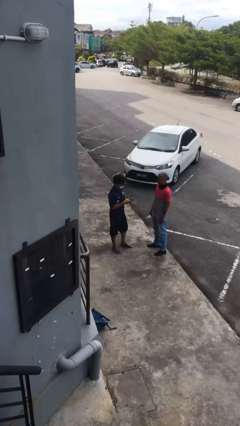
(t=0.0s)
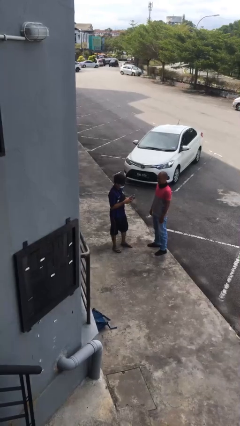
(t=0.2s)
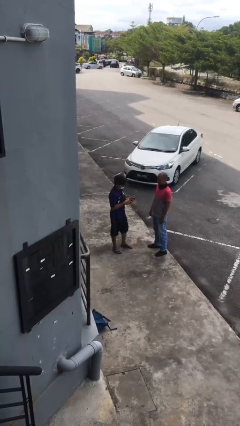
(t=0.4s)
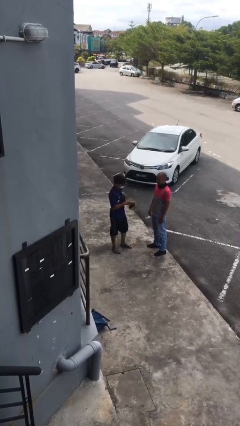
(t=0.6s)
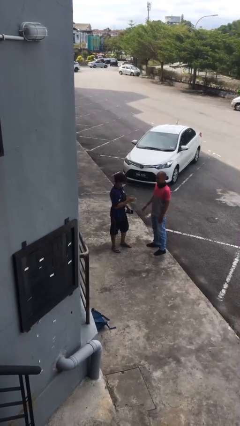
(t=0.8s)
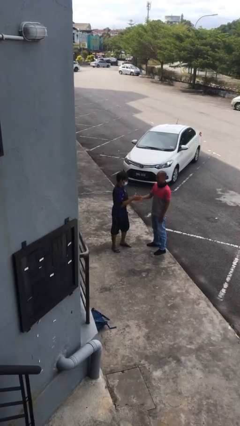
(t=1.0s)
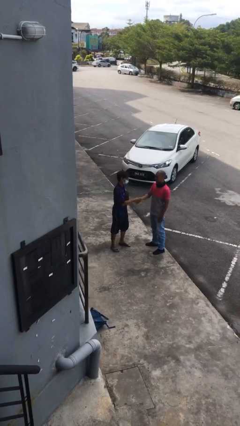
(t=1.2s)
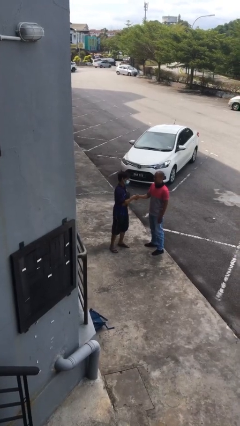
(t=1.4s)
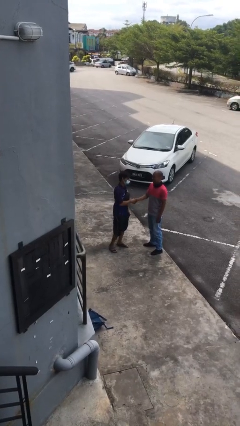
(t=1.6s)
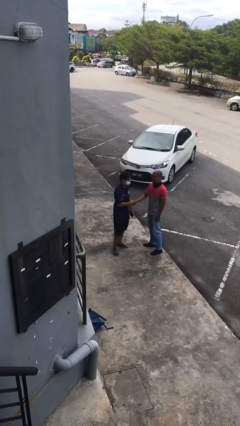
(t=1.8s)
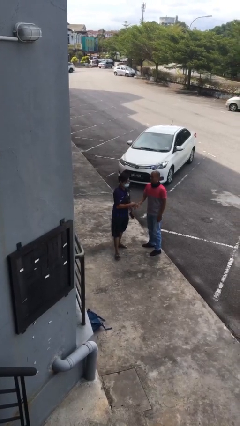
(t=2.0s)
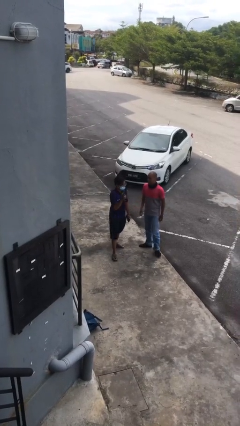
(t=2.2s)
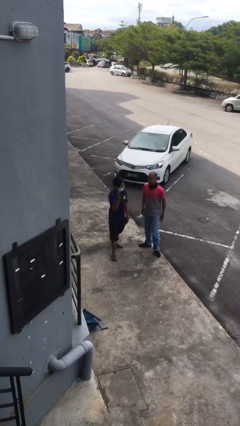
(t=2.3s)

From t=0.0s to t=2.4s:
person shakes hand

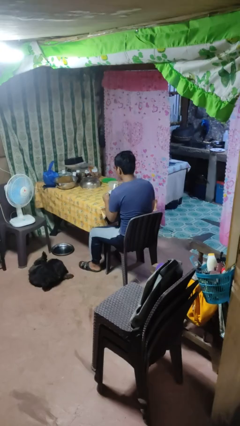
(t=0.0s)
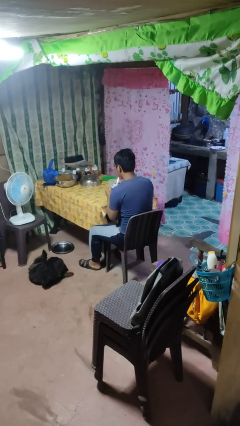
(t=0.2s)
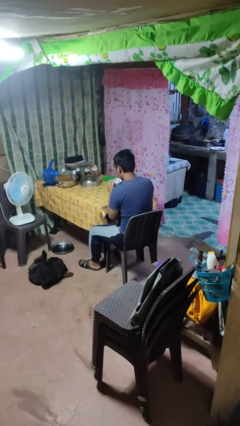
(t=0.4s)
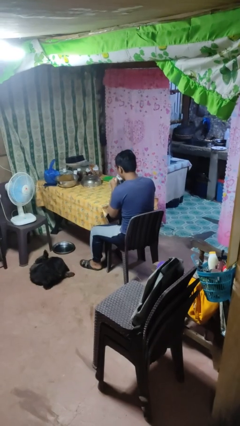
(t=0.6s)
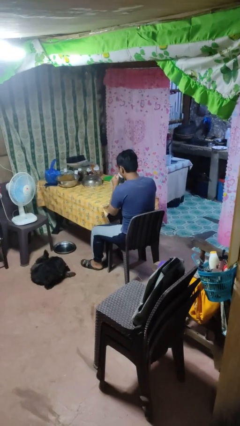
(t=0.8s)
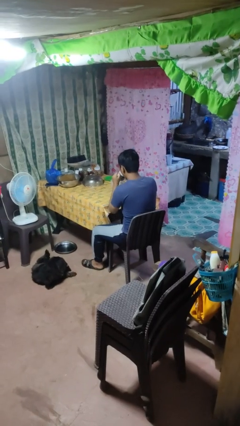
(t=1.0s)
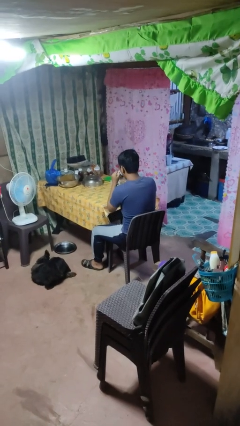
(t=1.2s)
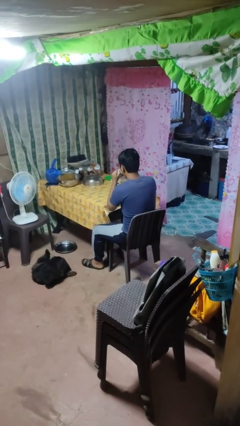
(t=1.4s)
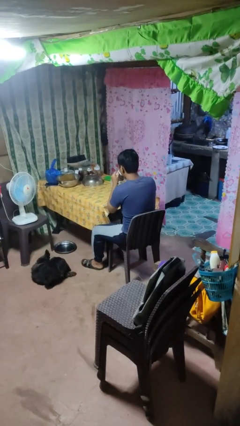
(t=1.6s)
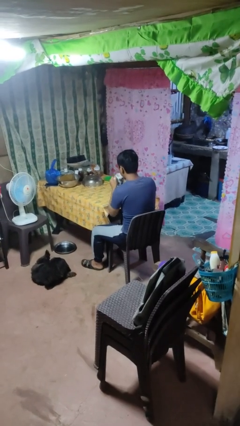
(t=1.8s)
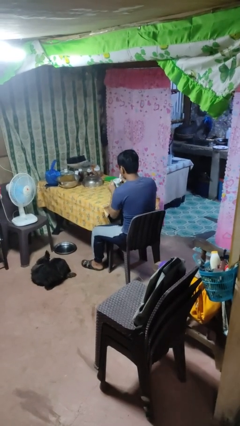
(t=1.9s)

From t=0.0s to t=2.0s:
person drinks from mug

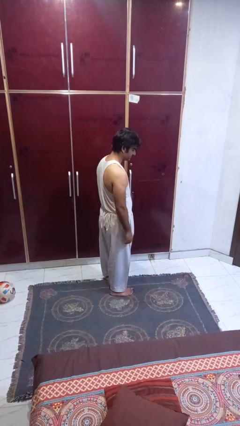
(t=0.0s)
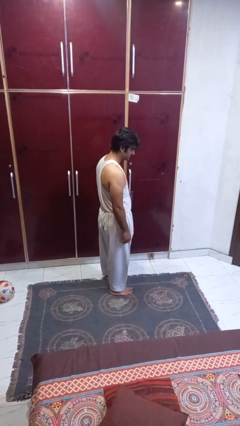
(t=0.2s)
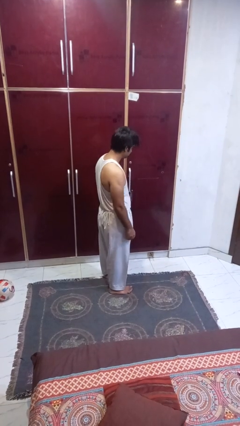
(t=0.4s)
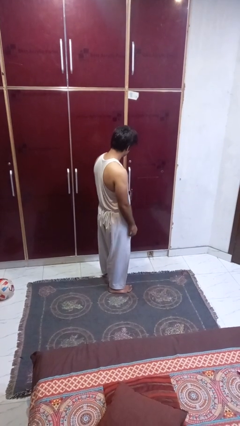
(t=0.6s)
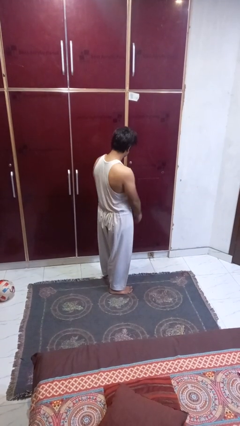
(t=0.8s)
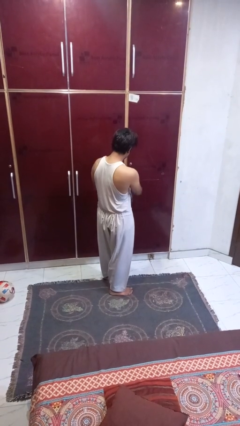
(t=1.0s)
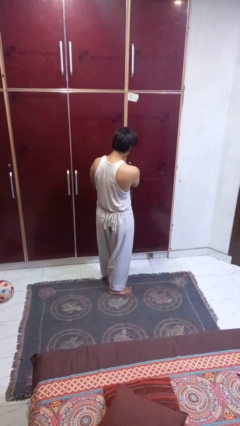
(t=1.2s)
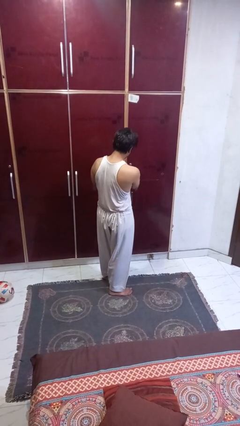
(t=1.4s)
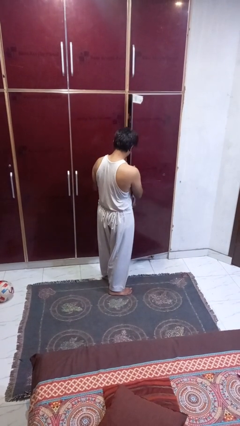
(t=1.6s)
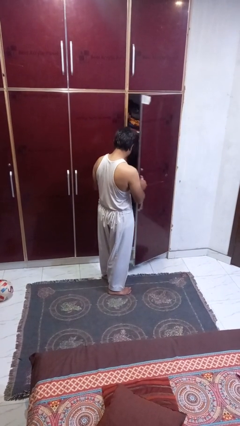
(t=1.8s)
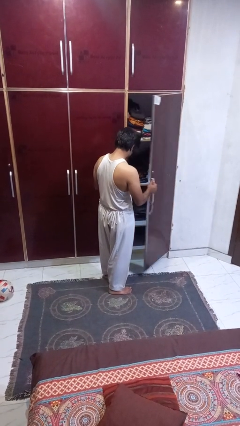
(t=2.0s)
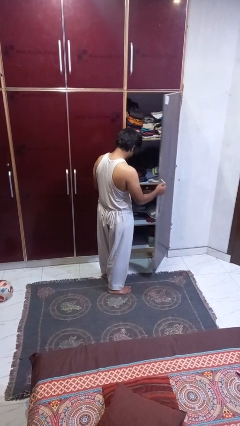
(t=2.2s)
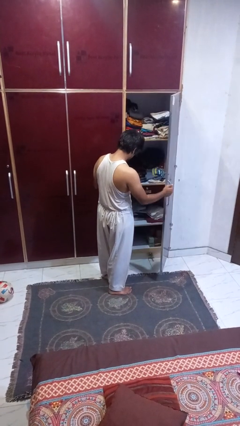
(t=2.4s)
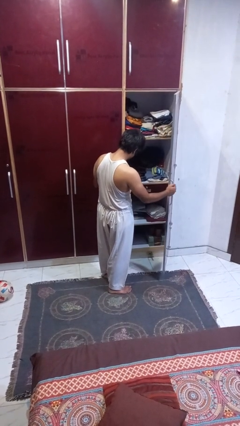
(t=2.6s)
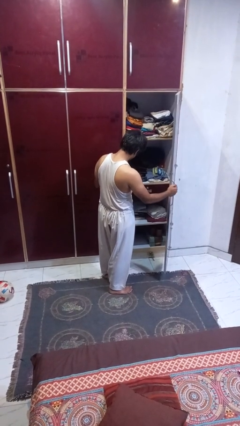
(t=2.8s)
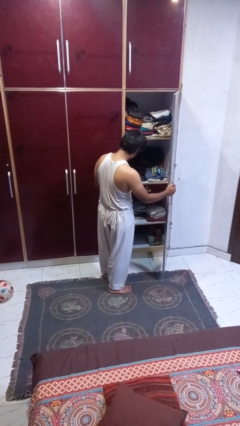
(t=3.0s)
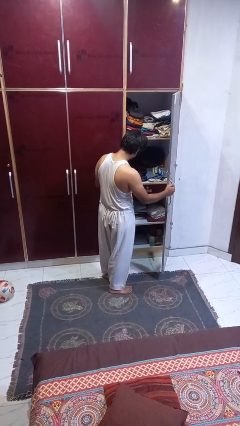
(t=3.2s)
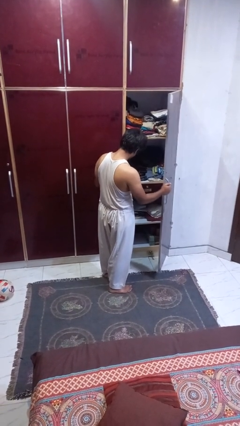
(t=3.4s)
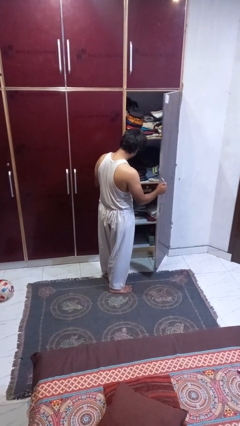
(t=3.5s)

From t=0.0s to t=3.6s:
person opens closet door

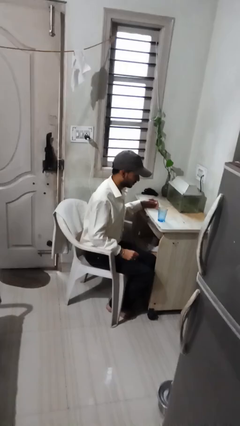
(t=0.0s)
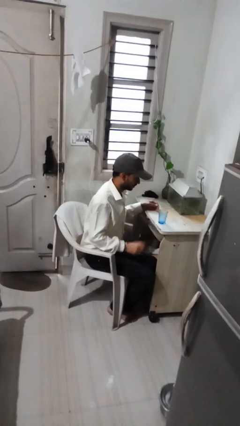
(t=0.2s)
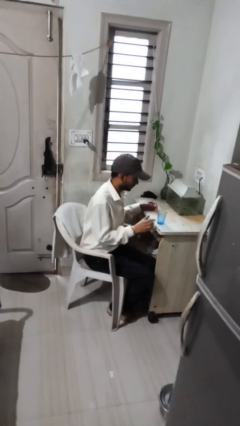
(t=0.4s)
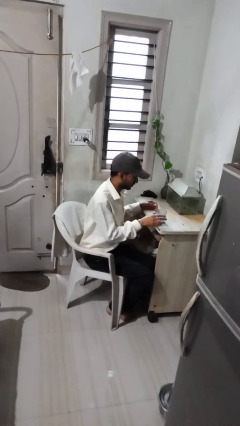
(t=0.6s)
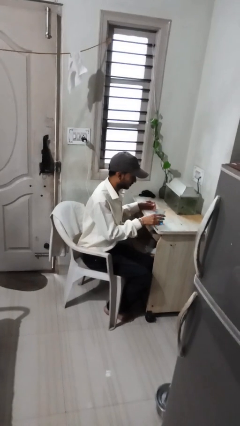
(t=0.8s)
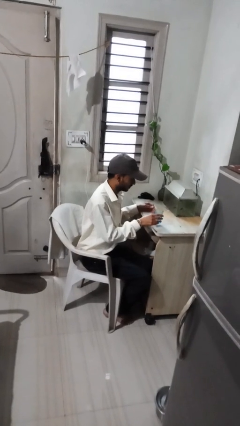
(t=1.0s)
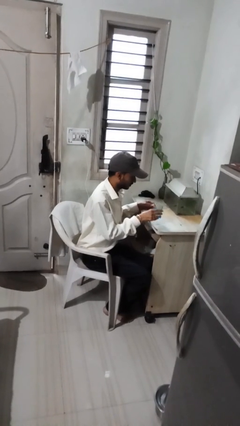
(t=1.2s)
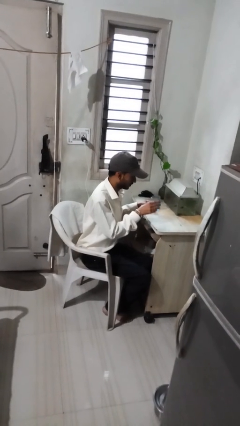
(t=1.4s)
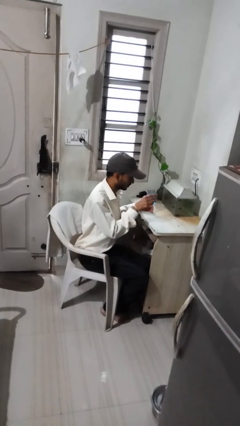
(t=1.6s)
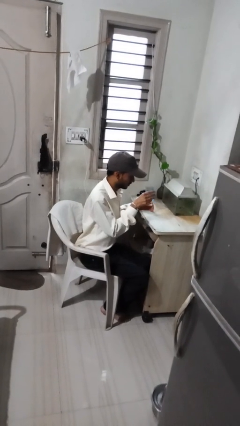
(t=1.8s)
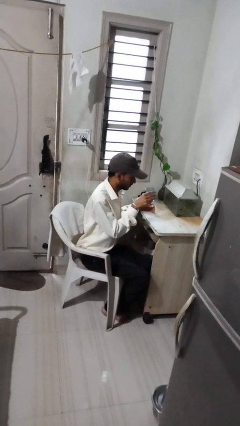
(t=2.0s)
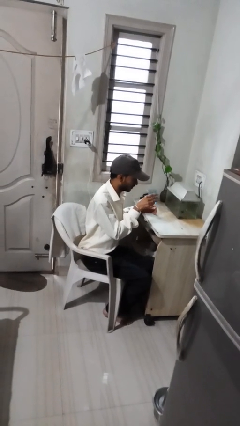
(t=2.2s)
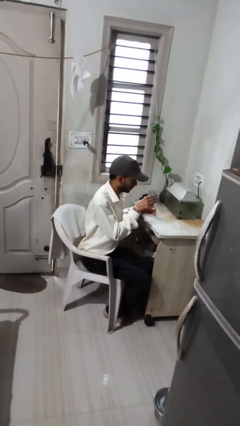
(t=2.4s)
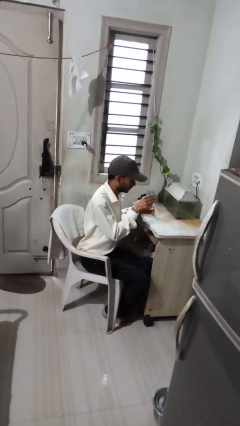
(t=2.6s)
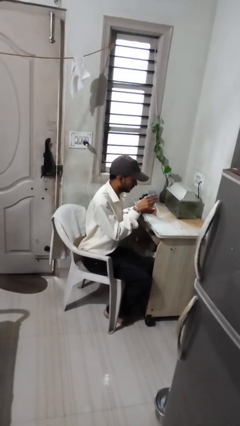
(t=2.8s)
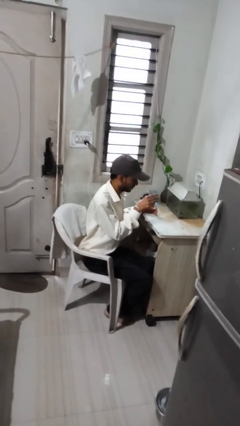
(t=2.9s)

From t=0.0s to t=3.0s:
person picks up object from table

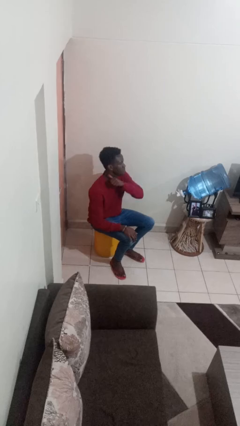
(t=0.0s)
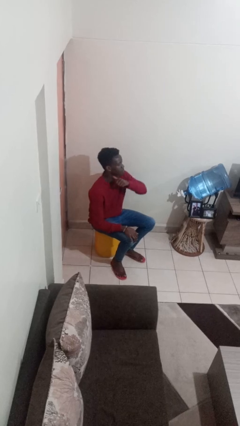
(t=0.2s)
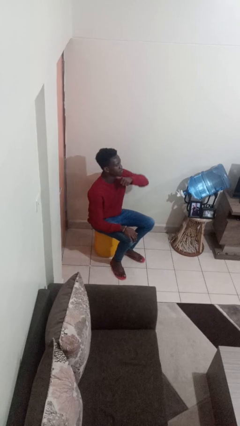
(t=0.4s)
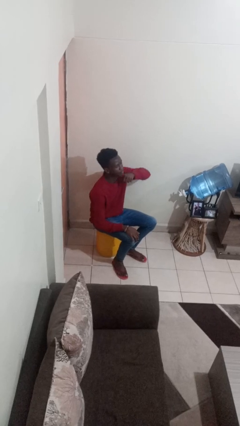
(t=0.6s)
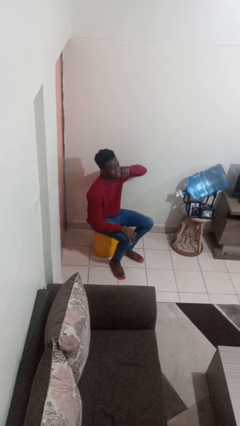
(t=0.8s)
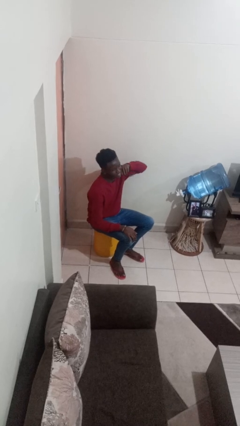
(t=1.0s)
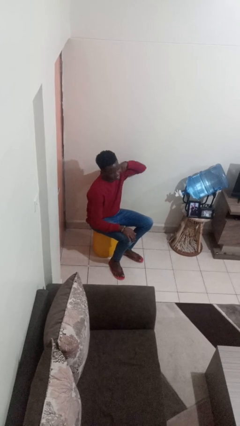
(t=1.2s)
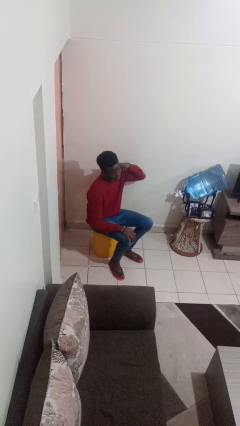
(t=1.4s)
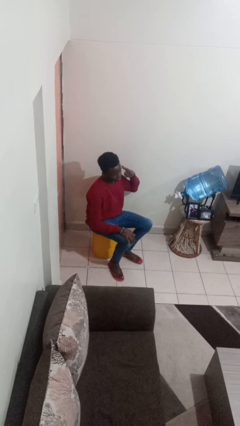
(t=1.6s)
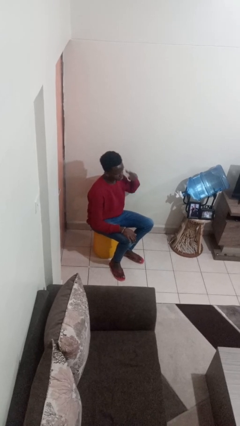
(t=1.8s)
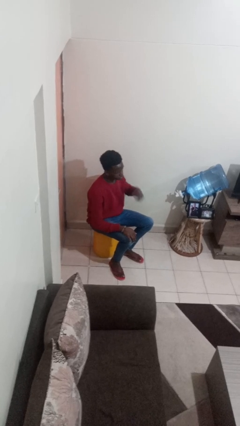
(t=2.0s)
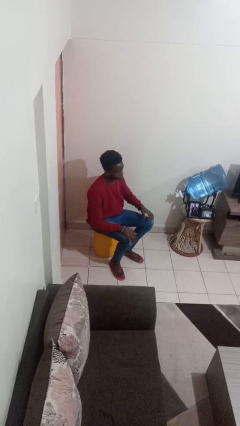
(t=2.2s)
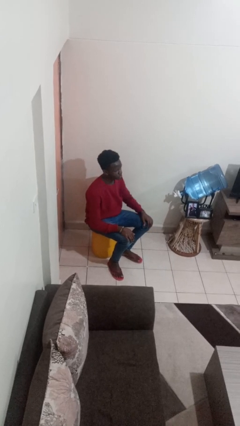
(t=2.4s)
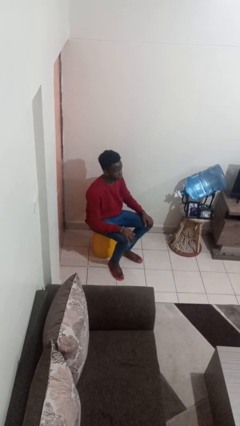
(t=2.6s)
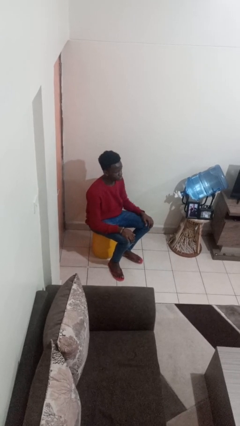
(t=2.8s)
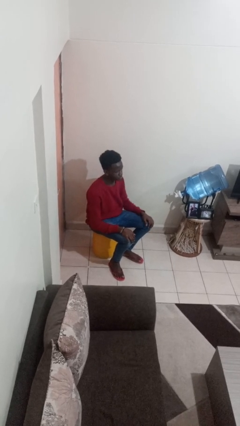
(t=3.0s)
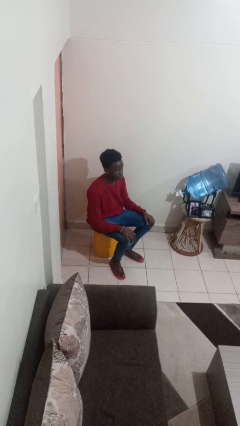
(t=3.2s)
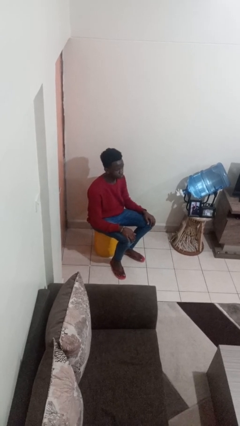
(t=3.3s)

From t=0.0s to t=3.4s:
person gestures cut

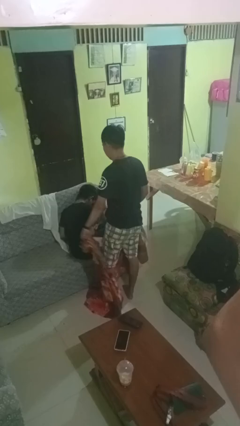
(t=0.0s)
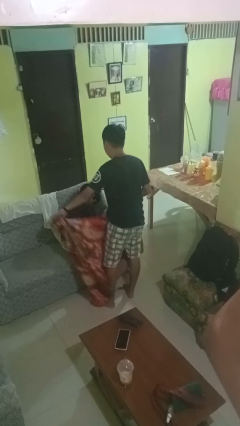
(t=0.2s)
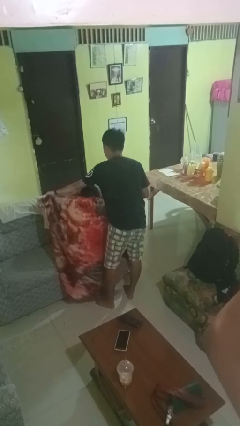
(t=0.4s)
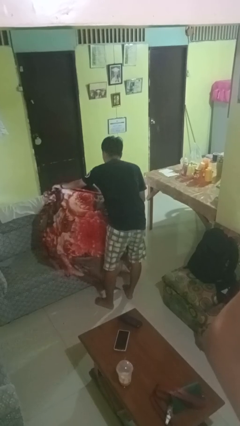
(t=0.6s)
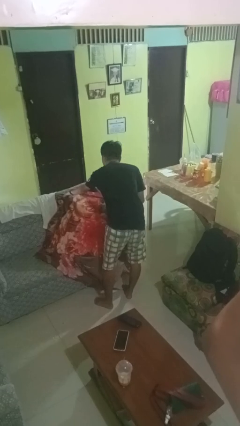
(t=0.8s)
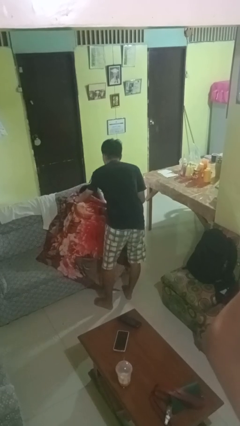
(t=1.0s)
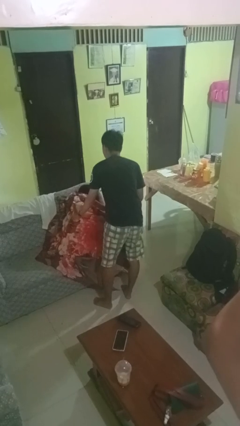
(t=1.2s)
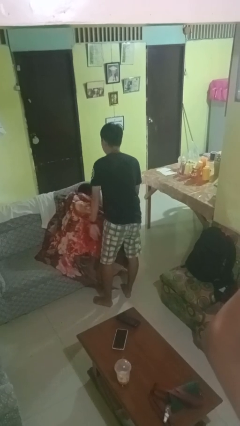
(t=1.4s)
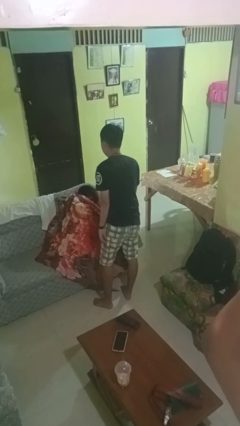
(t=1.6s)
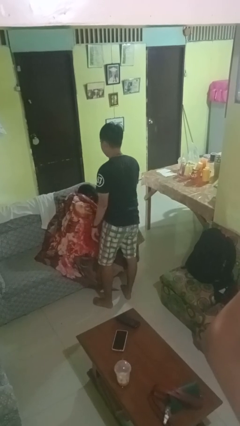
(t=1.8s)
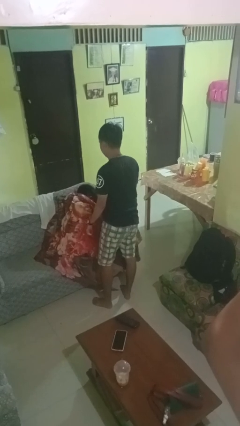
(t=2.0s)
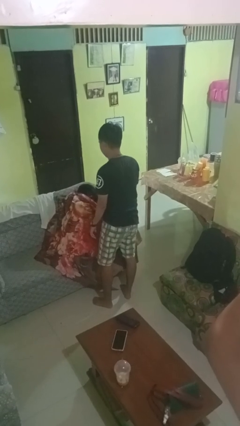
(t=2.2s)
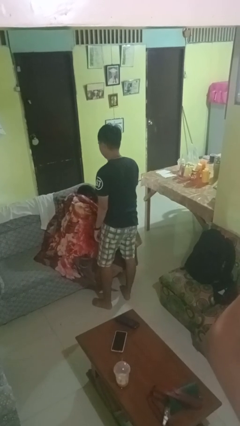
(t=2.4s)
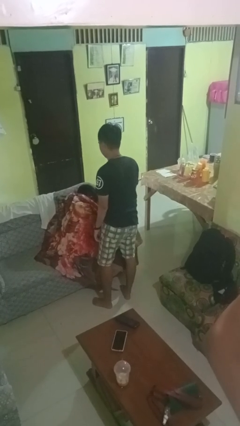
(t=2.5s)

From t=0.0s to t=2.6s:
person covers friend with blanket
